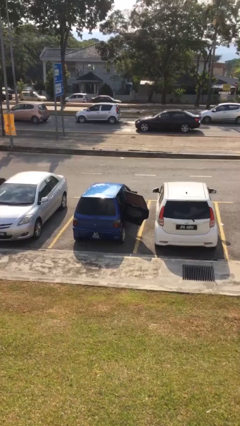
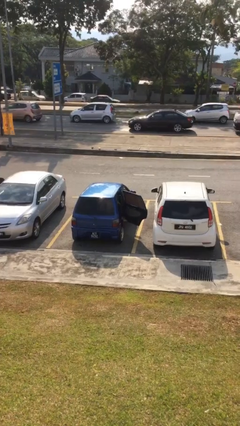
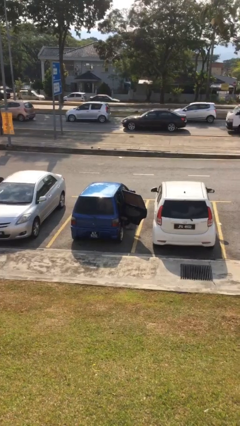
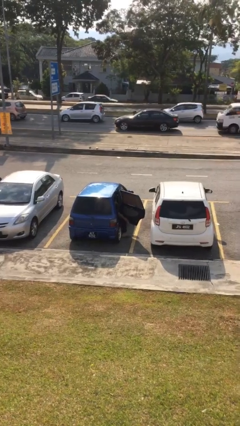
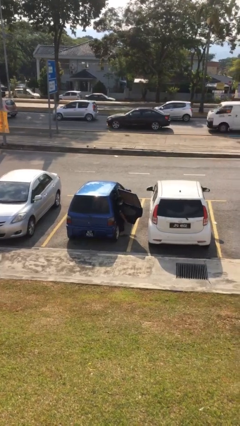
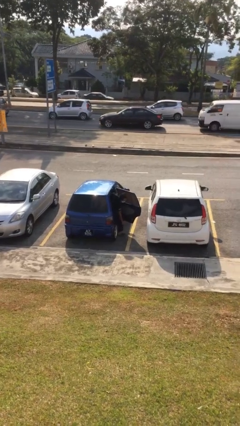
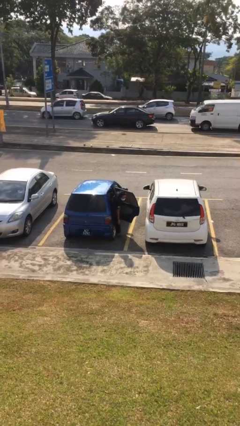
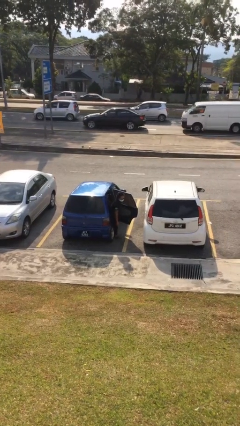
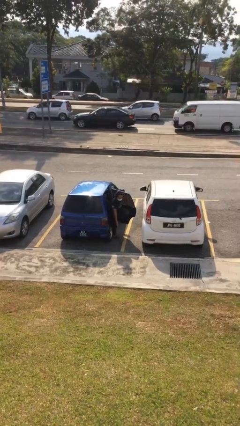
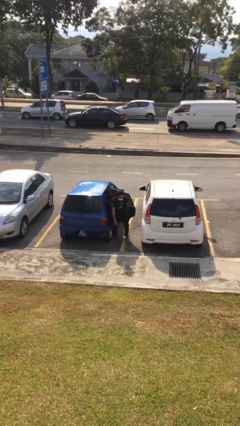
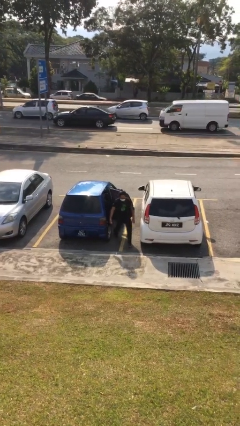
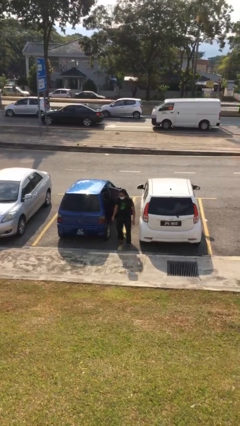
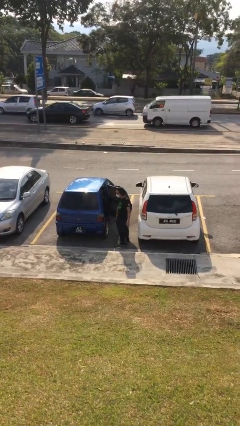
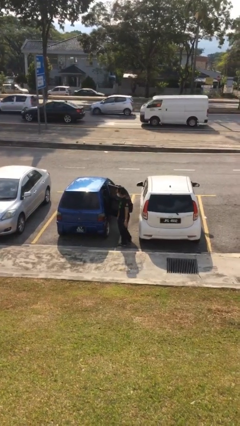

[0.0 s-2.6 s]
person exits car

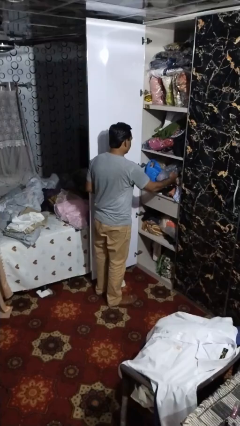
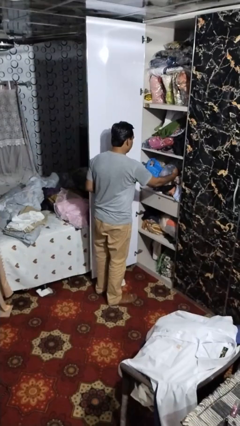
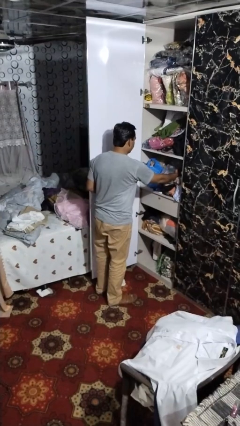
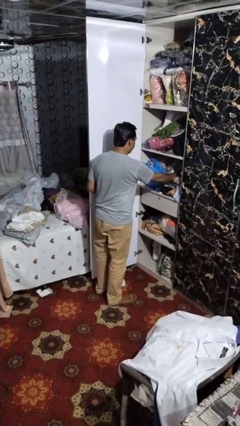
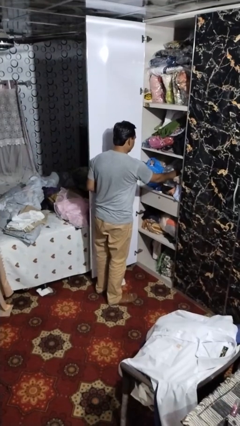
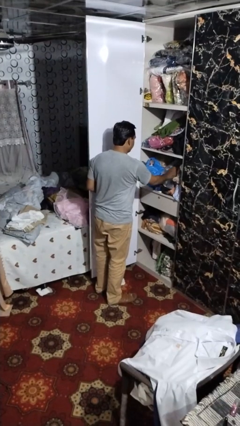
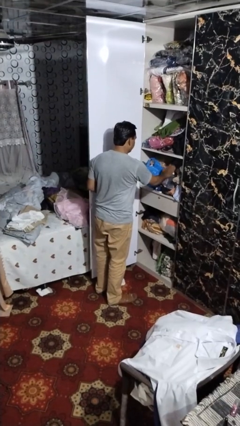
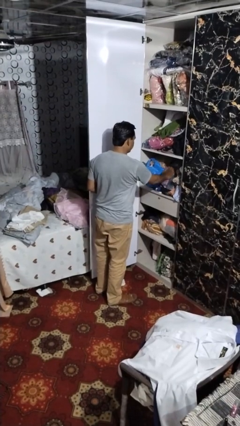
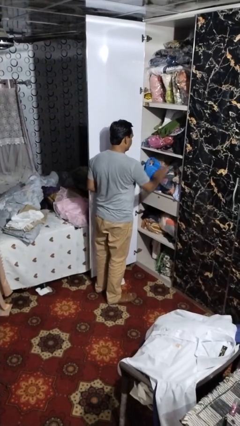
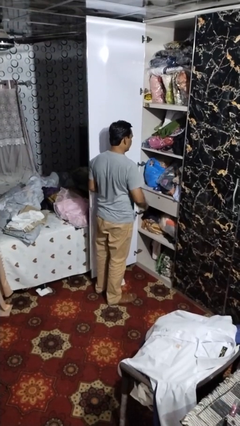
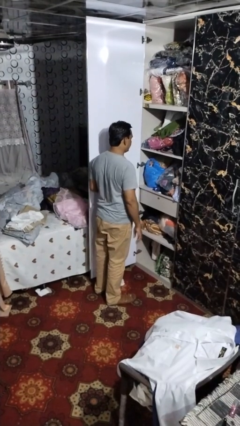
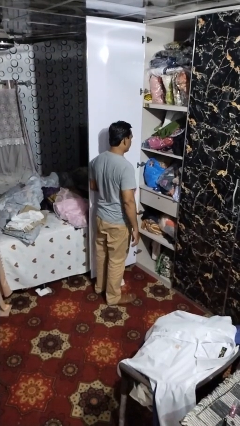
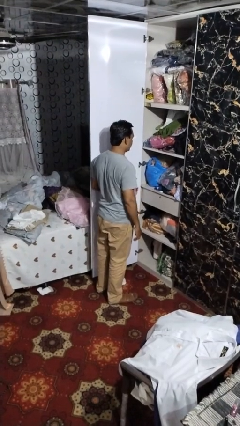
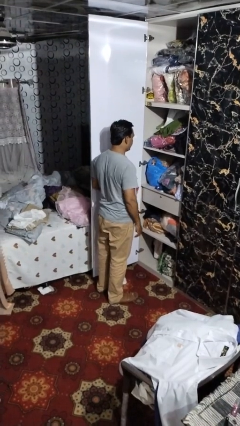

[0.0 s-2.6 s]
person puts clothes into dresser

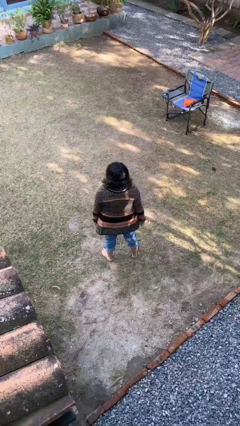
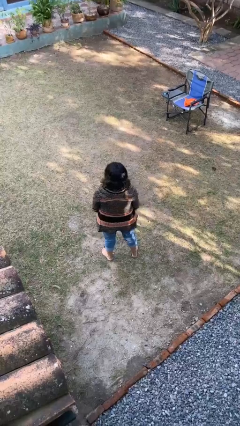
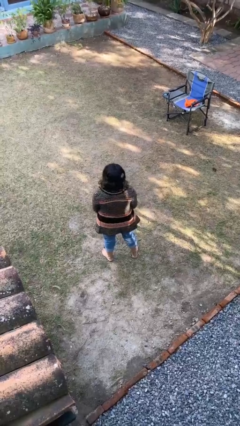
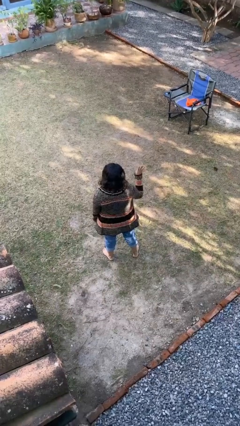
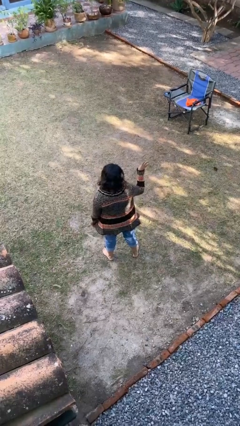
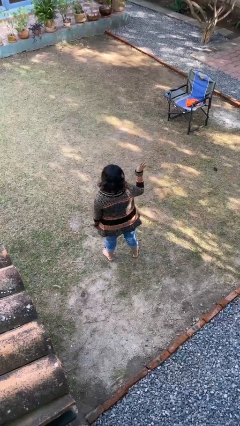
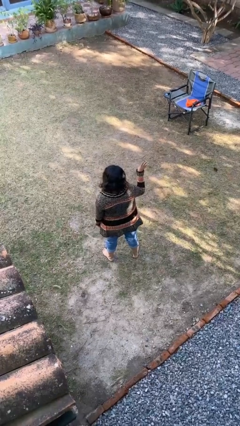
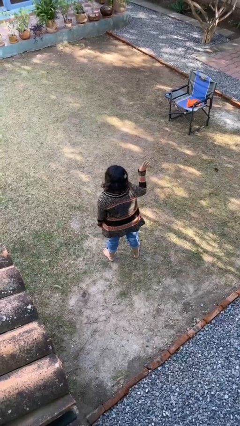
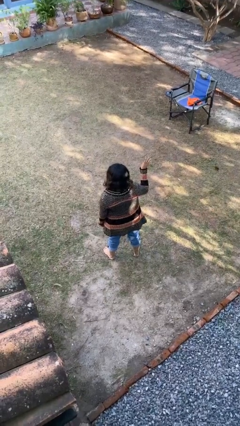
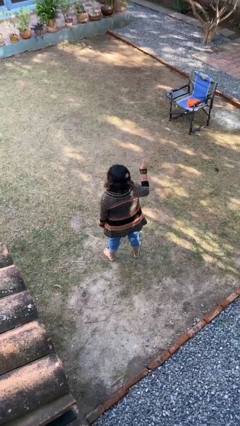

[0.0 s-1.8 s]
person gestures number four

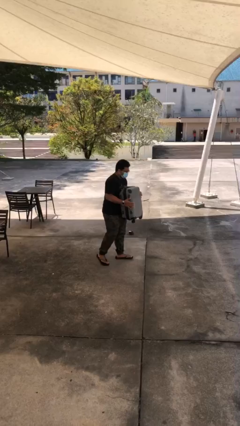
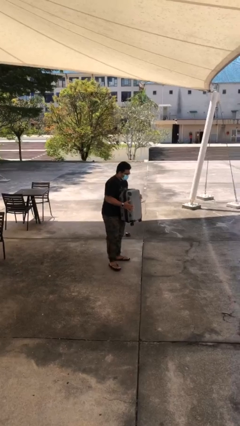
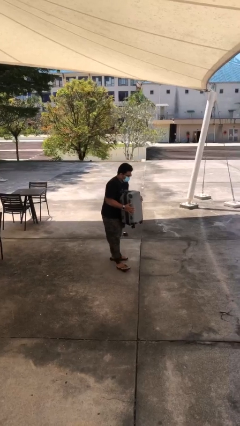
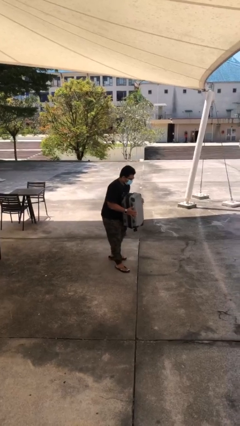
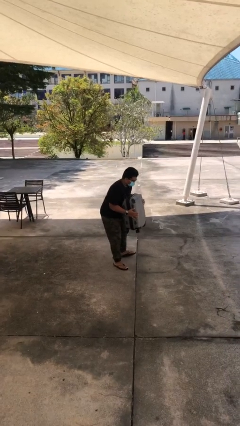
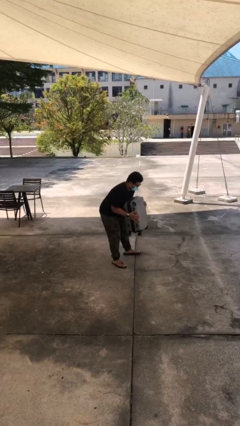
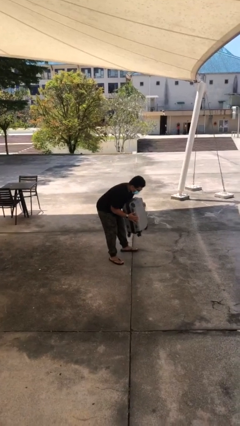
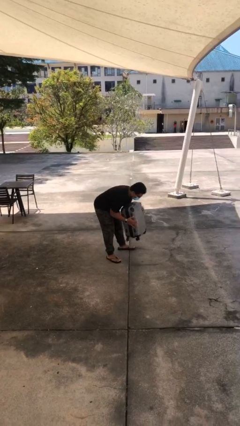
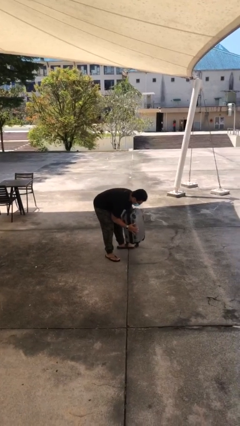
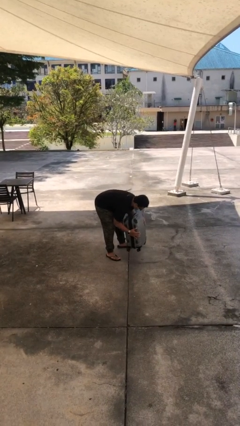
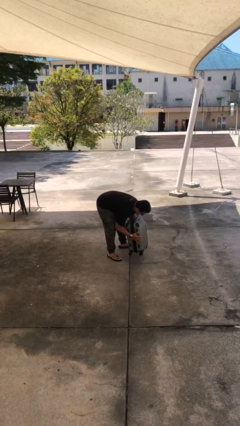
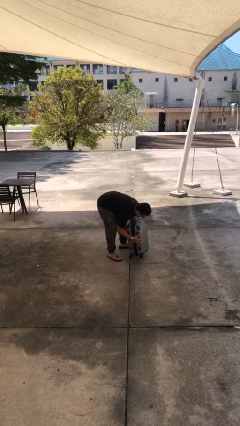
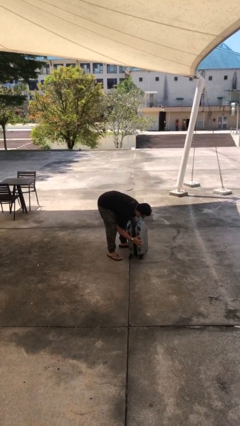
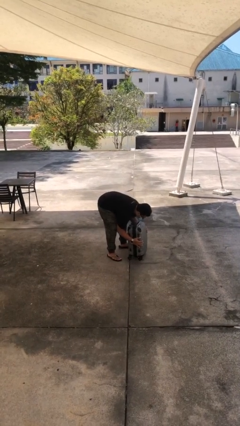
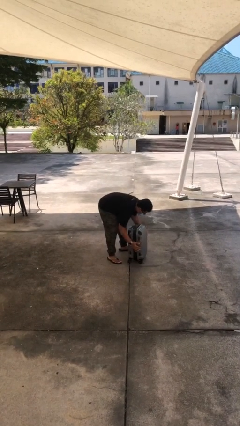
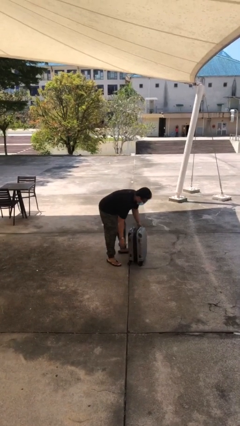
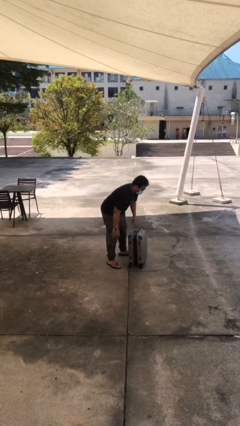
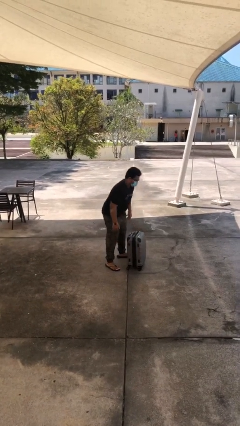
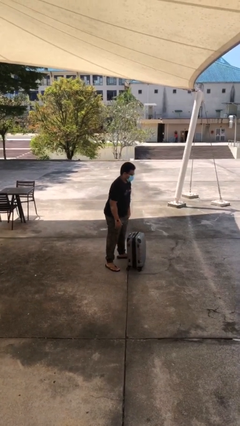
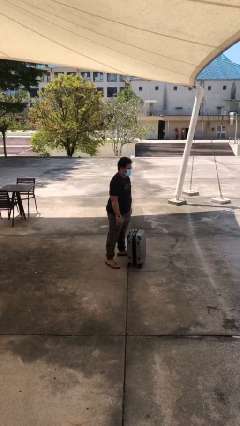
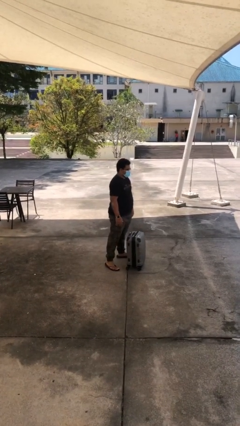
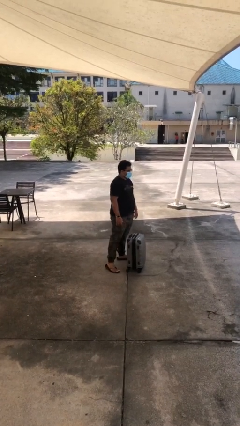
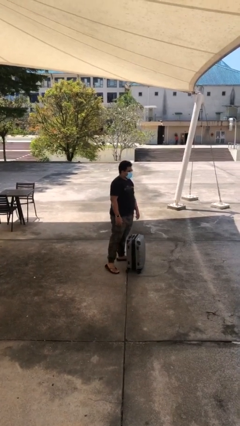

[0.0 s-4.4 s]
person puts down object on floor

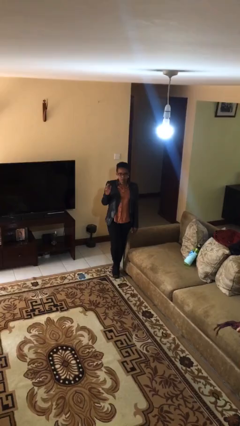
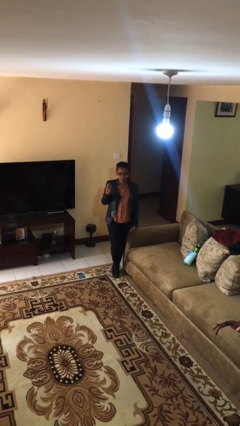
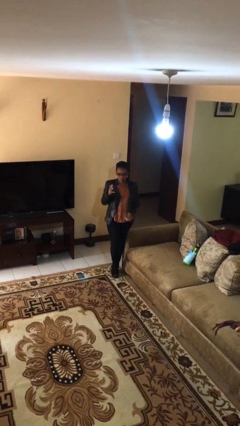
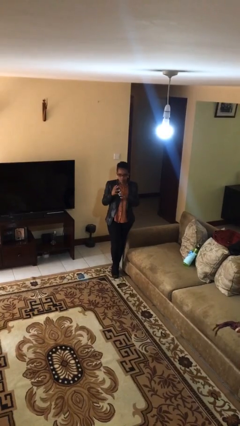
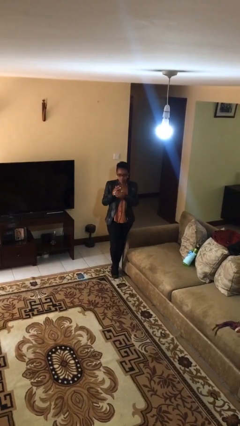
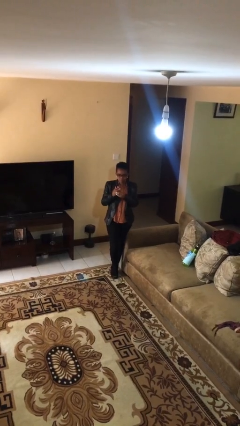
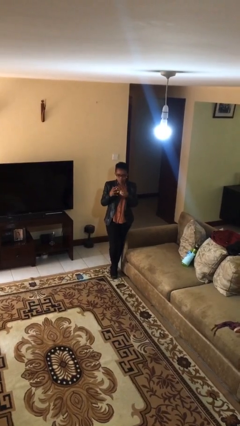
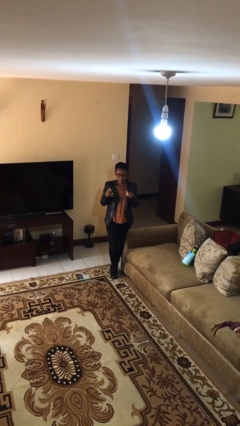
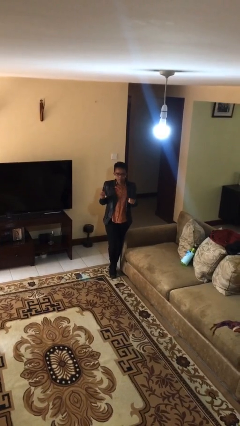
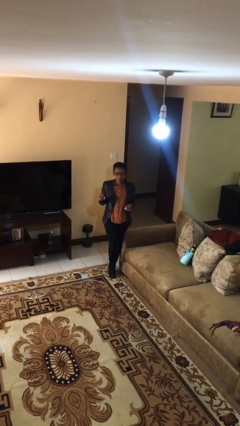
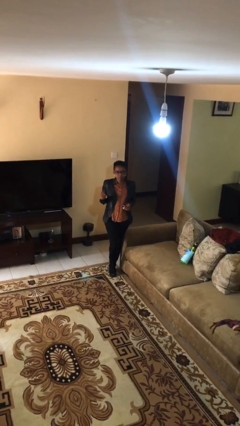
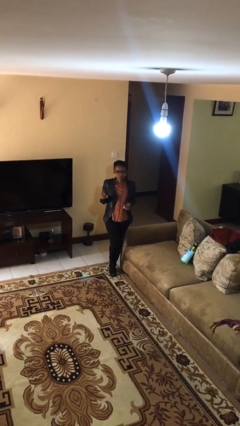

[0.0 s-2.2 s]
person takes off ring

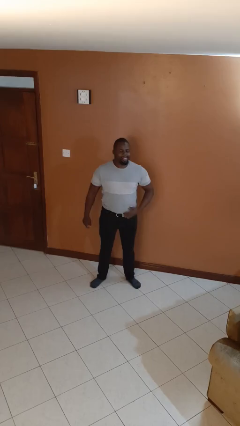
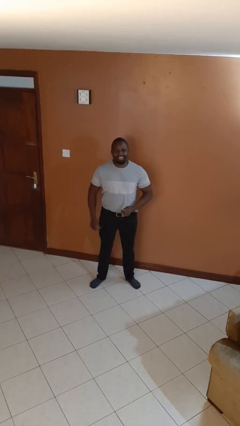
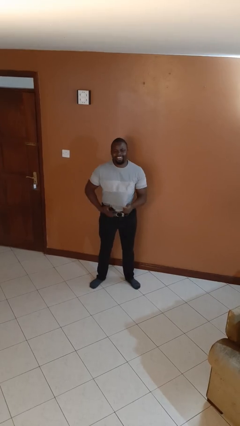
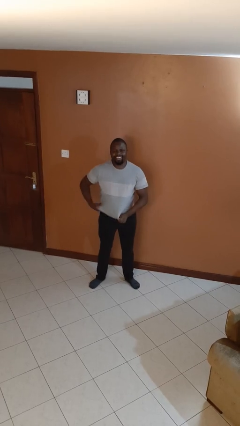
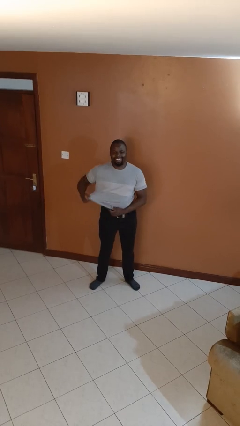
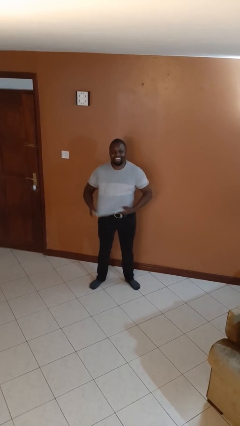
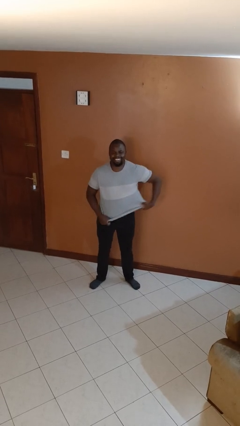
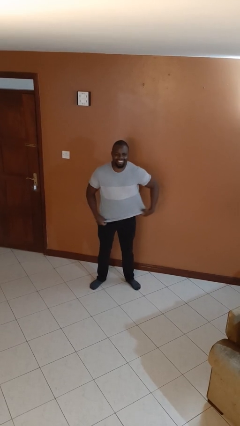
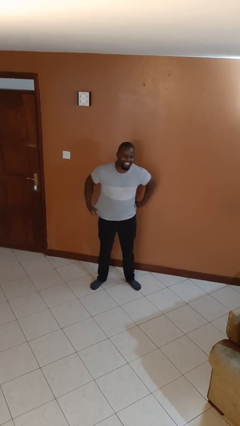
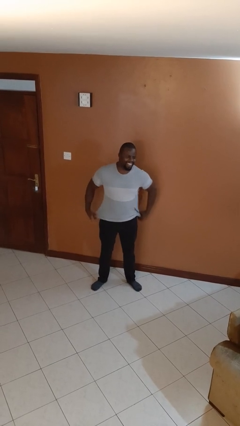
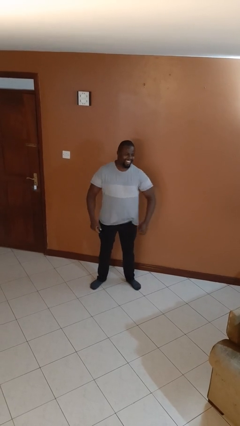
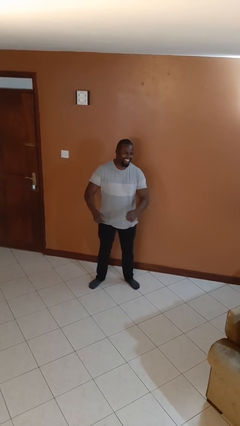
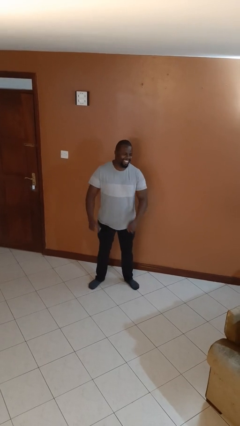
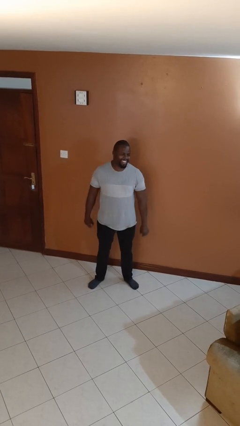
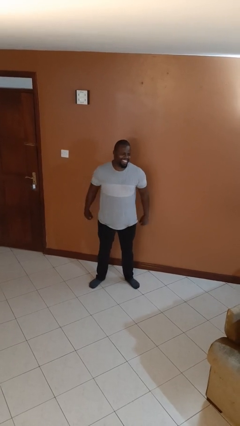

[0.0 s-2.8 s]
person untucks shirt

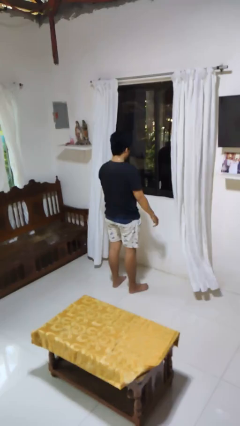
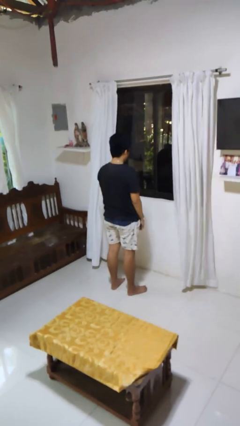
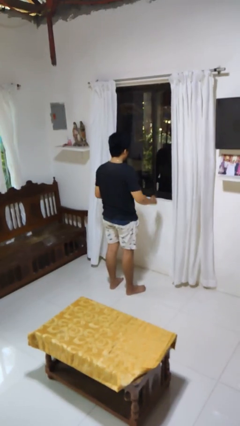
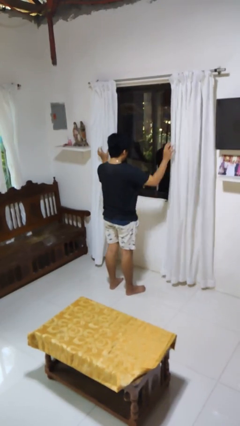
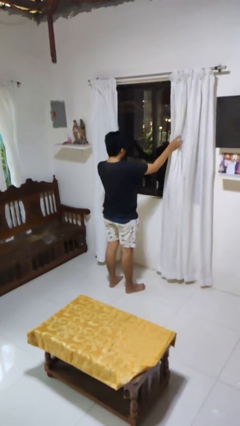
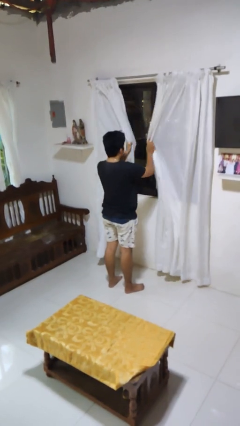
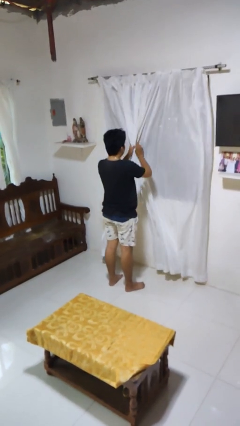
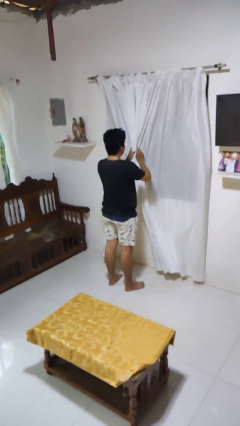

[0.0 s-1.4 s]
person closes curtains
